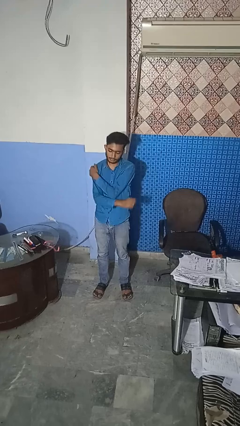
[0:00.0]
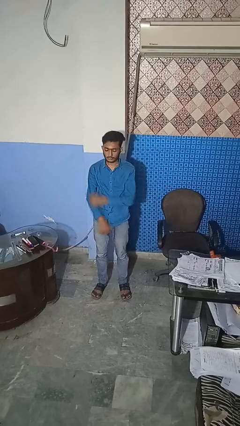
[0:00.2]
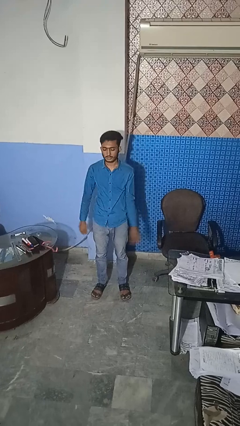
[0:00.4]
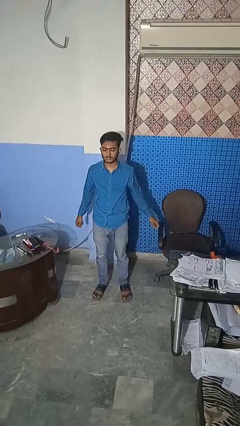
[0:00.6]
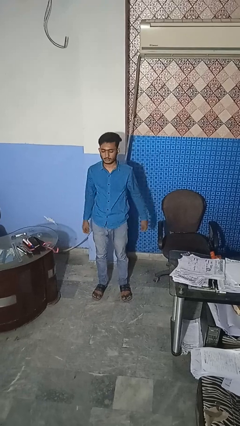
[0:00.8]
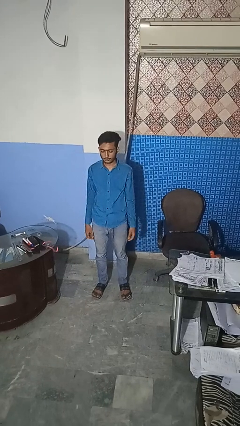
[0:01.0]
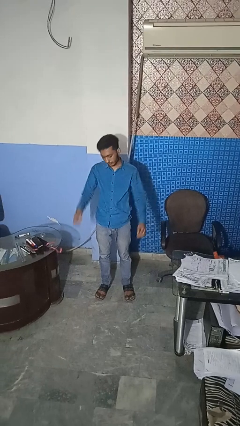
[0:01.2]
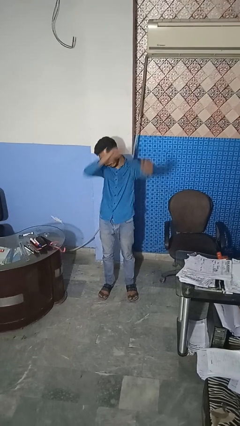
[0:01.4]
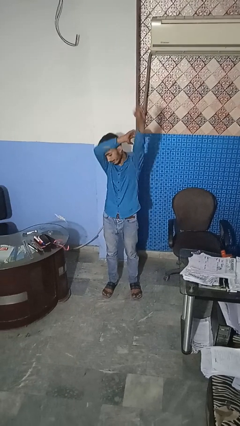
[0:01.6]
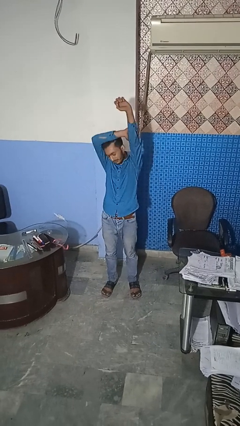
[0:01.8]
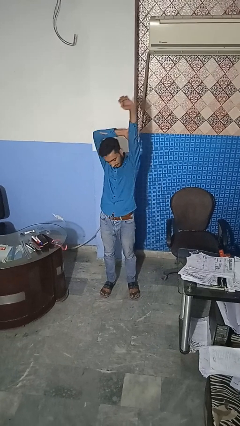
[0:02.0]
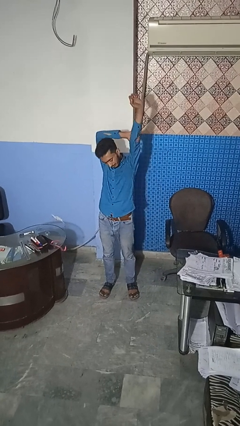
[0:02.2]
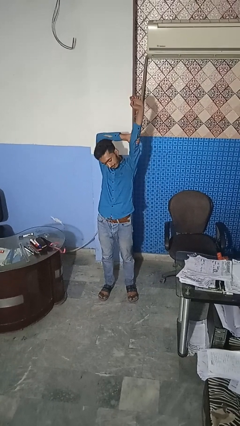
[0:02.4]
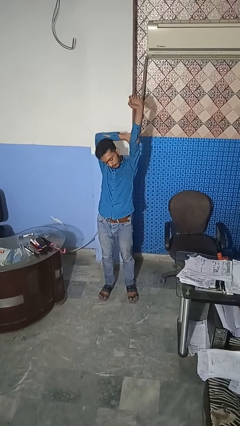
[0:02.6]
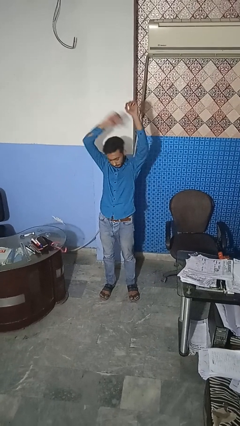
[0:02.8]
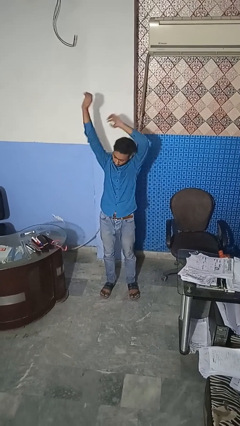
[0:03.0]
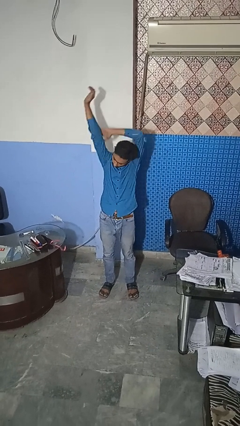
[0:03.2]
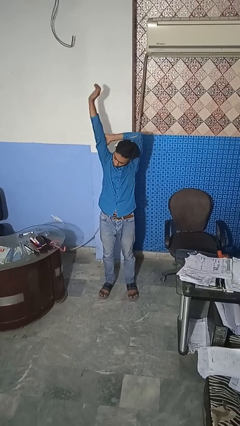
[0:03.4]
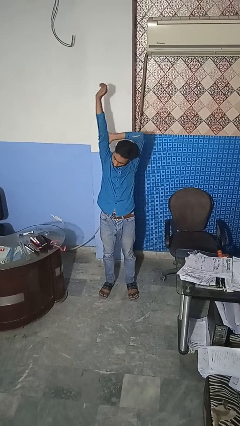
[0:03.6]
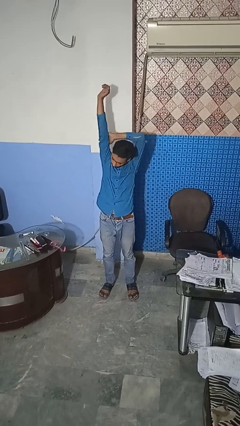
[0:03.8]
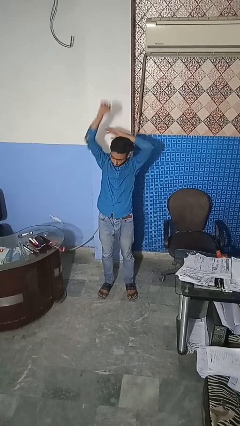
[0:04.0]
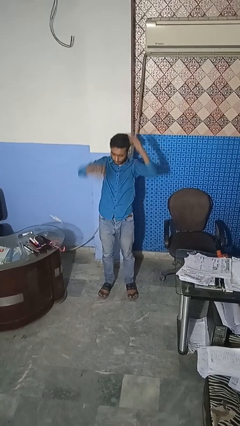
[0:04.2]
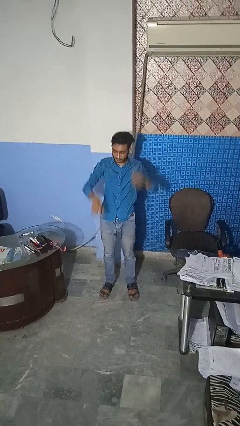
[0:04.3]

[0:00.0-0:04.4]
person stretches arms over head

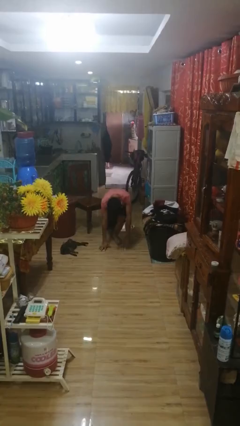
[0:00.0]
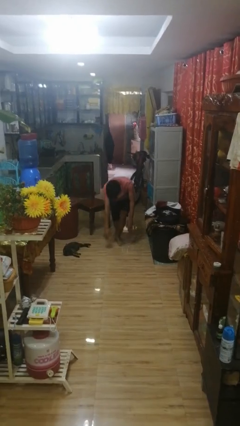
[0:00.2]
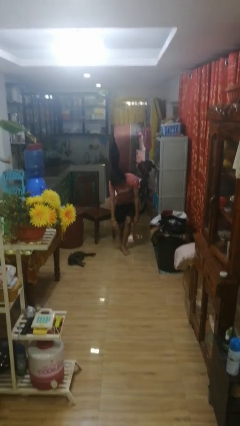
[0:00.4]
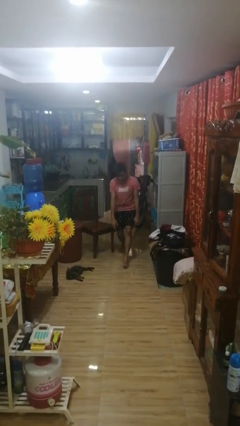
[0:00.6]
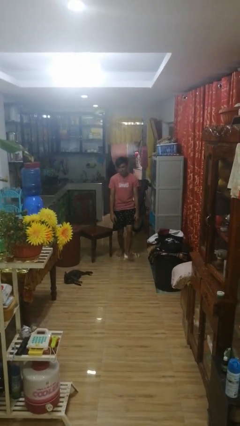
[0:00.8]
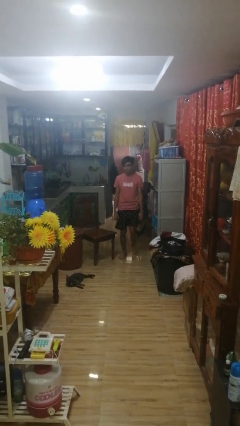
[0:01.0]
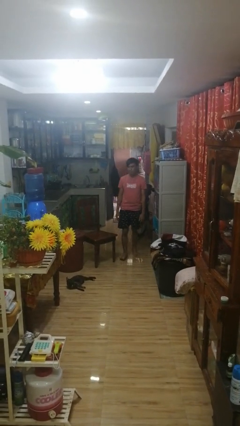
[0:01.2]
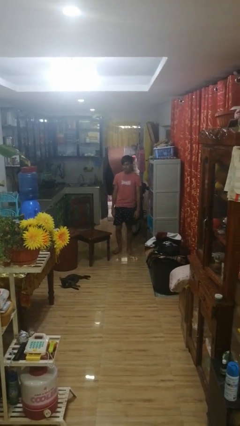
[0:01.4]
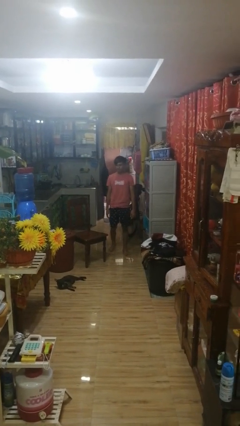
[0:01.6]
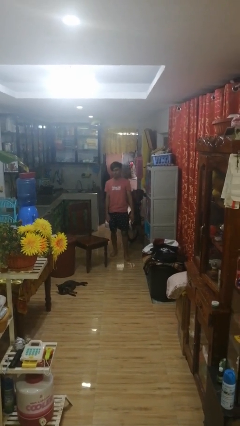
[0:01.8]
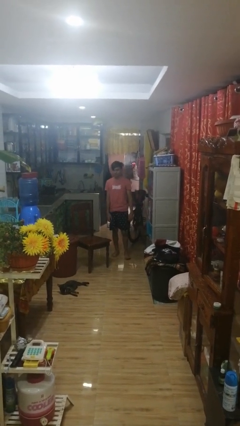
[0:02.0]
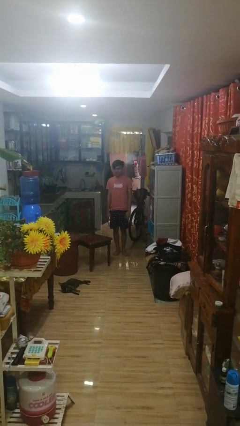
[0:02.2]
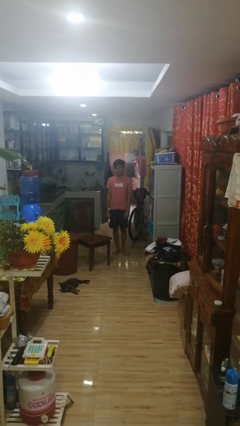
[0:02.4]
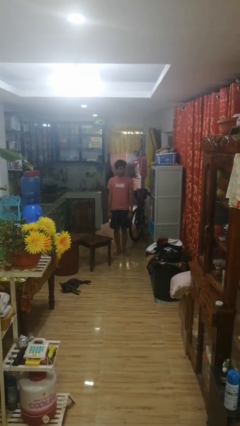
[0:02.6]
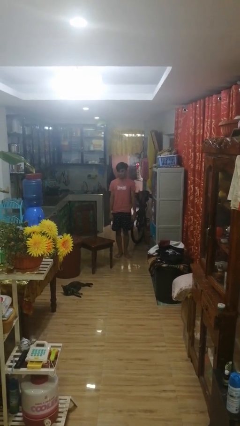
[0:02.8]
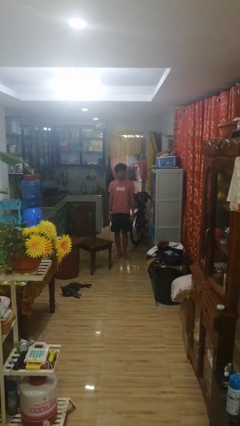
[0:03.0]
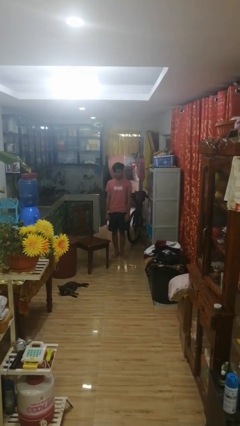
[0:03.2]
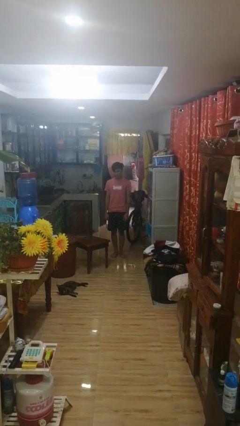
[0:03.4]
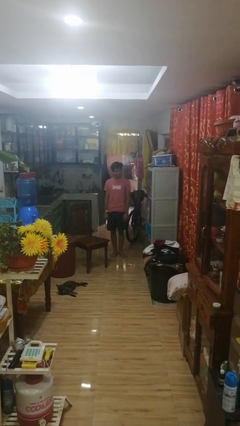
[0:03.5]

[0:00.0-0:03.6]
person stands up from floor

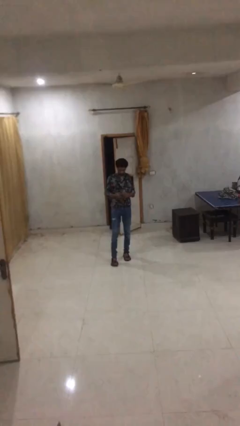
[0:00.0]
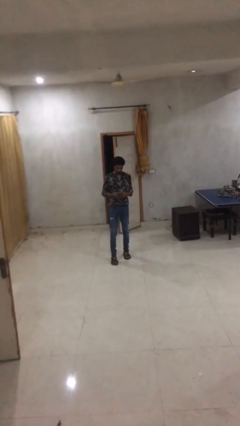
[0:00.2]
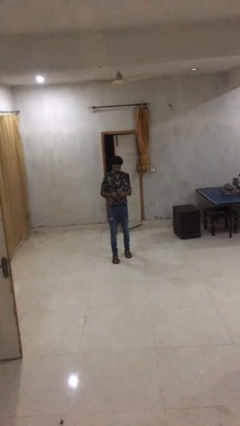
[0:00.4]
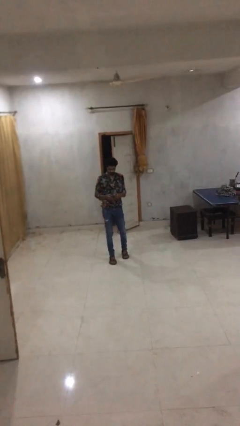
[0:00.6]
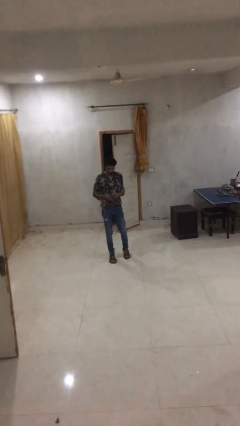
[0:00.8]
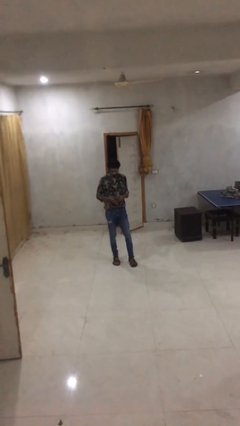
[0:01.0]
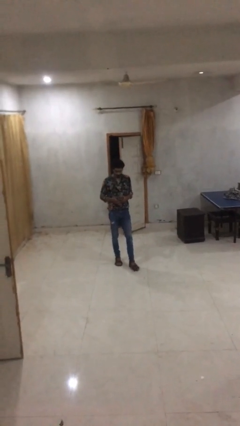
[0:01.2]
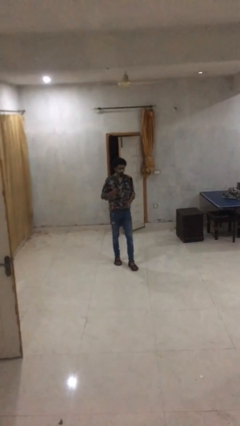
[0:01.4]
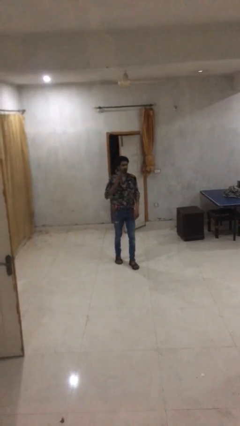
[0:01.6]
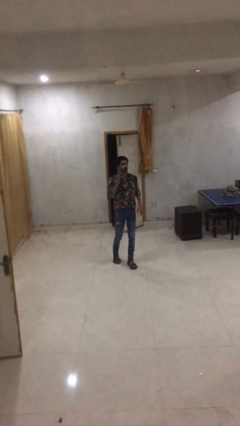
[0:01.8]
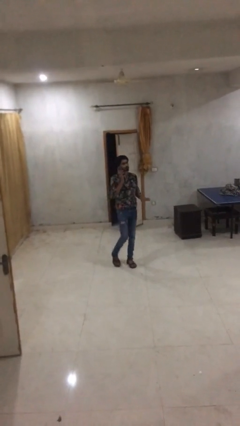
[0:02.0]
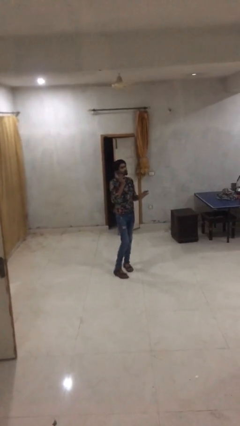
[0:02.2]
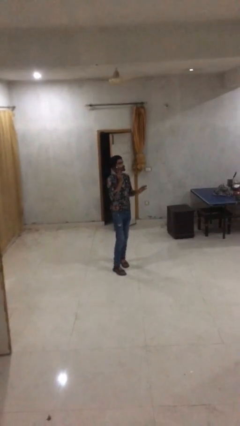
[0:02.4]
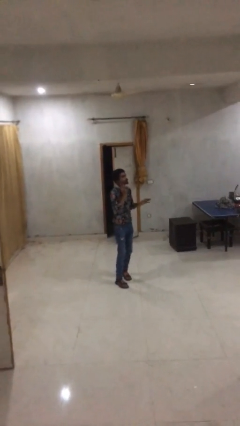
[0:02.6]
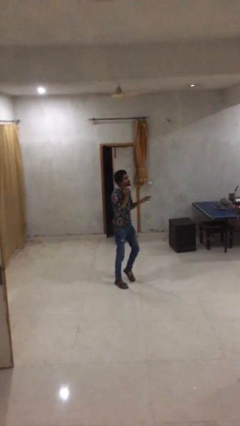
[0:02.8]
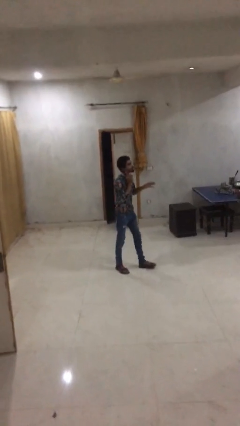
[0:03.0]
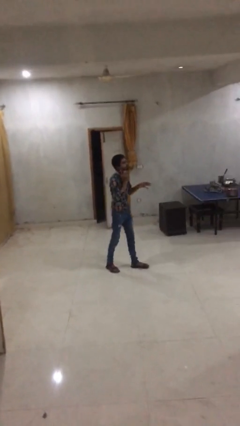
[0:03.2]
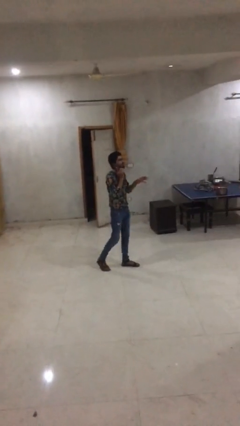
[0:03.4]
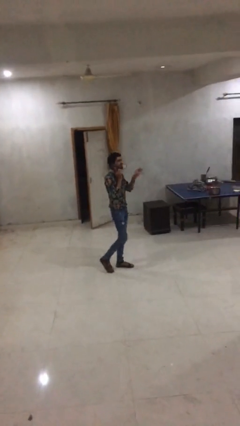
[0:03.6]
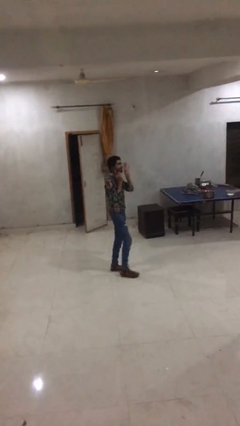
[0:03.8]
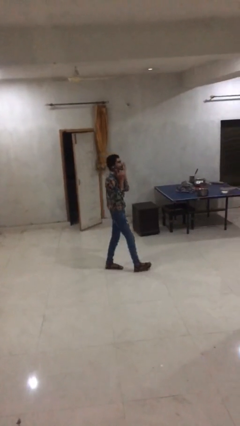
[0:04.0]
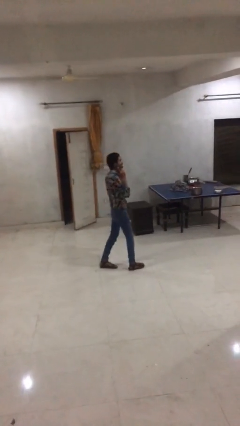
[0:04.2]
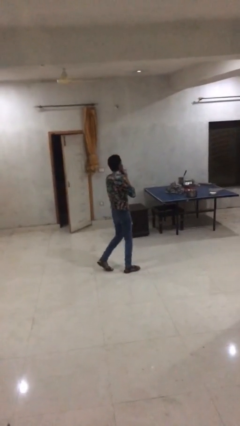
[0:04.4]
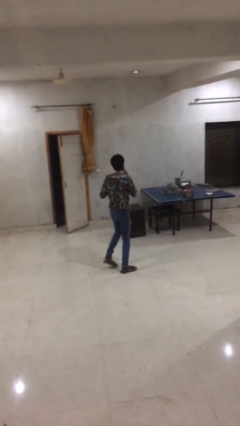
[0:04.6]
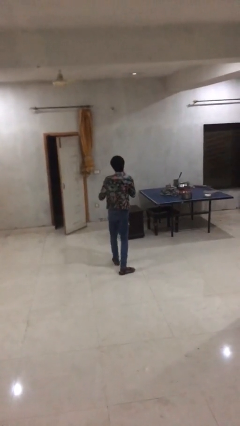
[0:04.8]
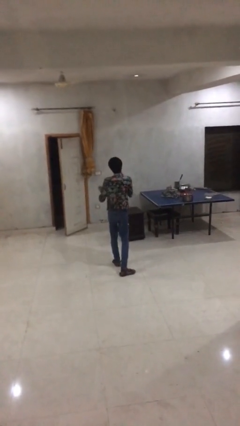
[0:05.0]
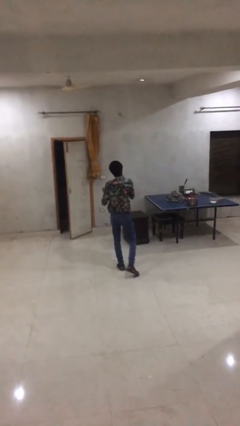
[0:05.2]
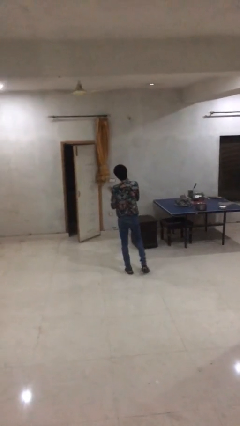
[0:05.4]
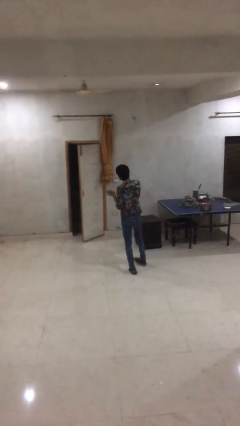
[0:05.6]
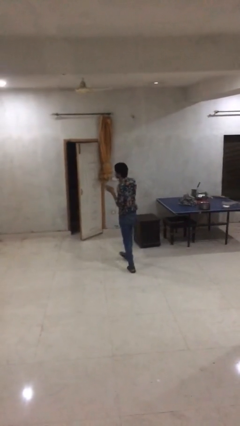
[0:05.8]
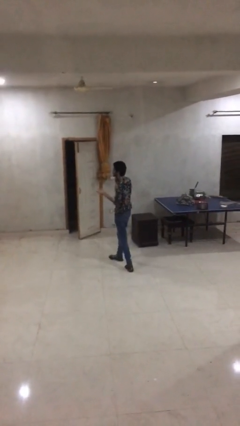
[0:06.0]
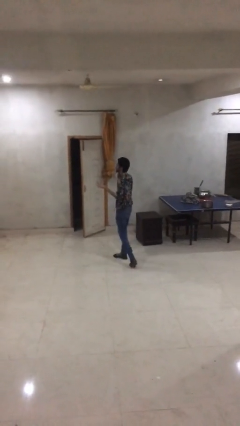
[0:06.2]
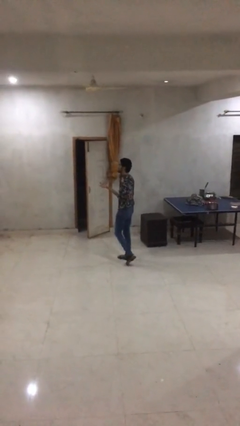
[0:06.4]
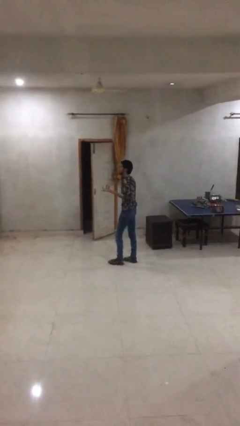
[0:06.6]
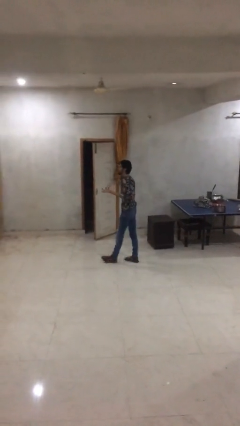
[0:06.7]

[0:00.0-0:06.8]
person talks on phone

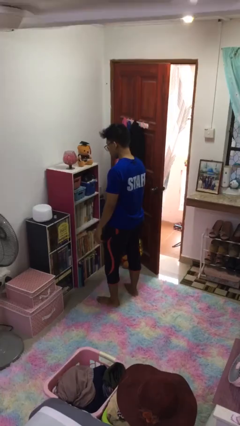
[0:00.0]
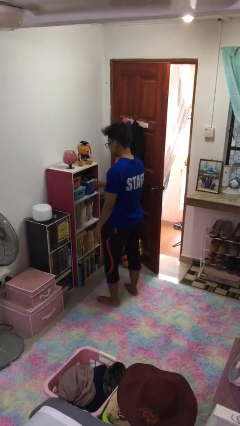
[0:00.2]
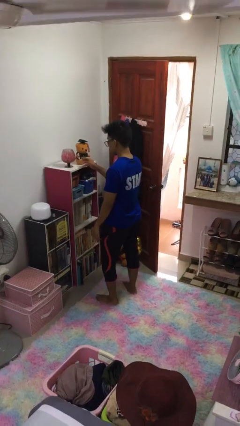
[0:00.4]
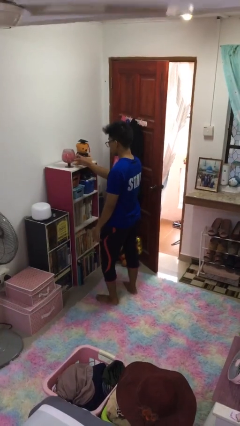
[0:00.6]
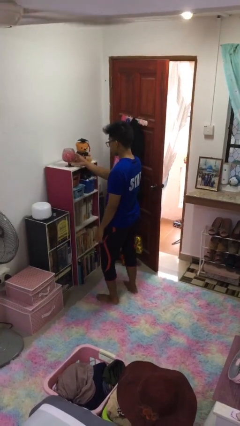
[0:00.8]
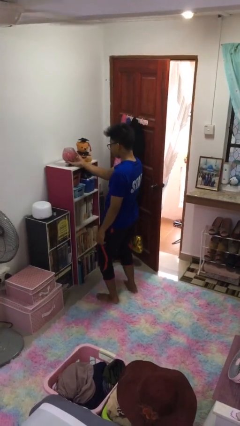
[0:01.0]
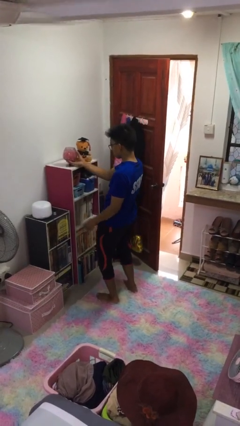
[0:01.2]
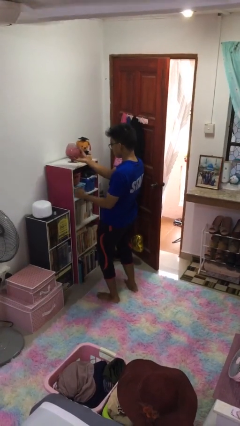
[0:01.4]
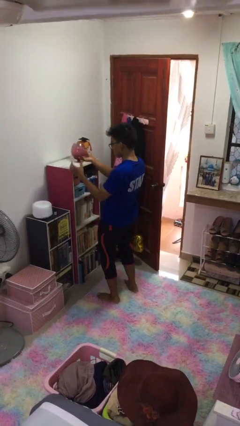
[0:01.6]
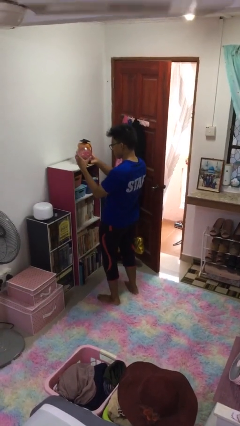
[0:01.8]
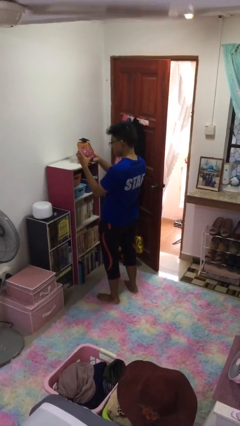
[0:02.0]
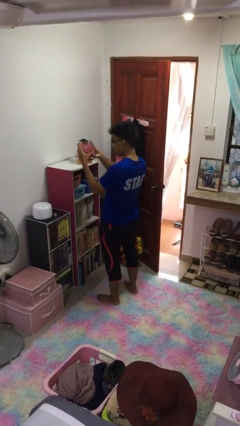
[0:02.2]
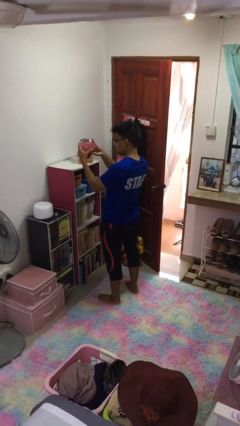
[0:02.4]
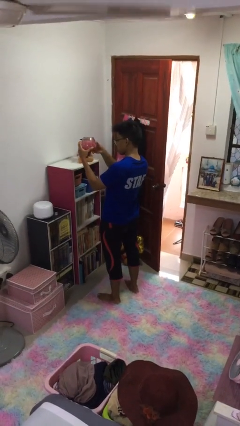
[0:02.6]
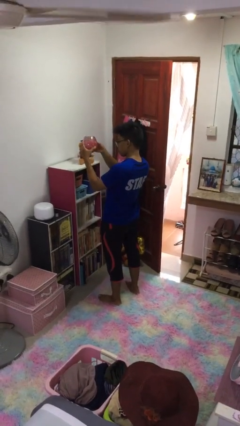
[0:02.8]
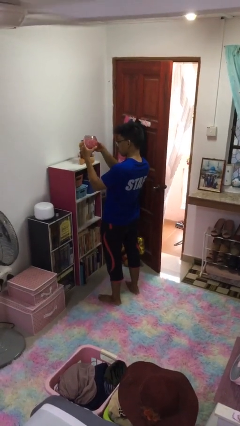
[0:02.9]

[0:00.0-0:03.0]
person picks up object from shelf

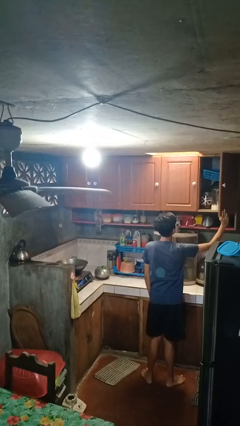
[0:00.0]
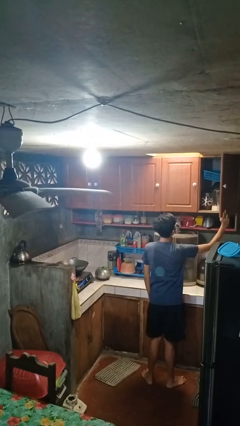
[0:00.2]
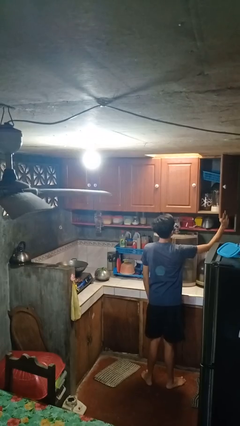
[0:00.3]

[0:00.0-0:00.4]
person closes cabinet
